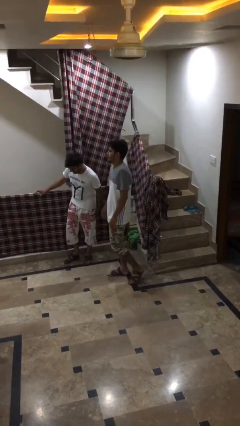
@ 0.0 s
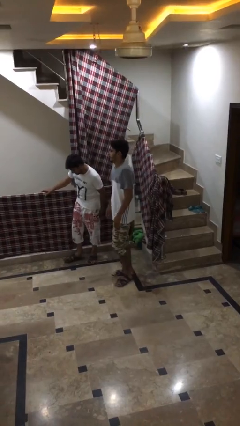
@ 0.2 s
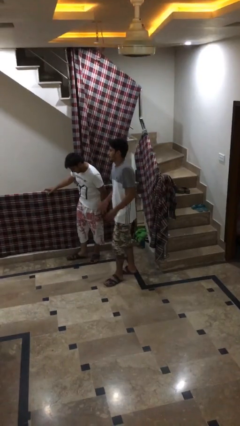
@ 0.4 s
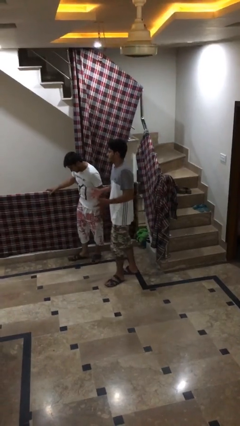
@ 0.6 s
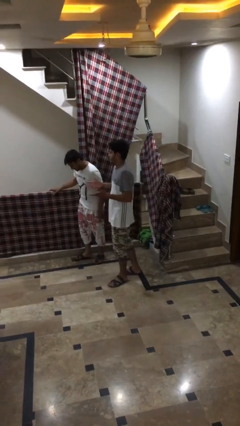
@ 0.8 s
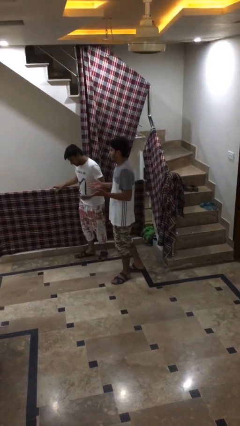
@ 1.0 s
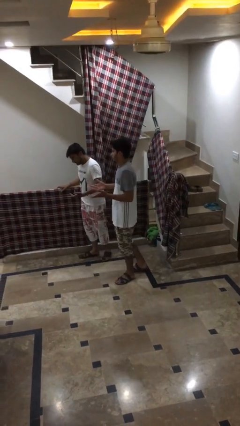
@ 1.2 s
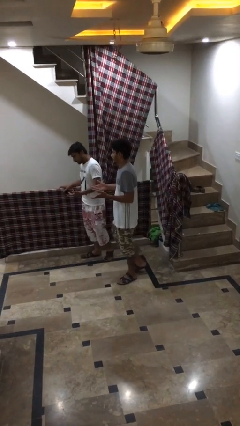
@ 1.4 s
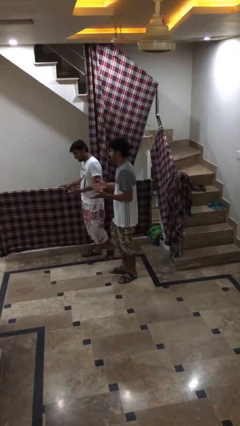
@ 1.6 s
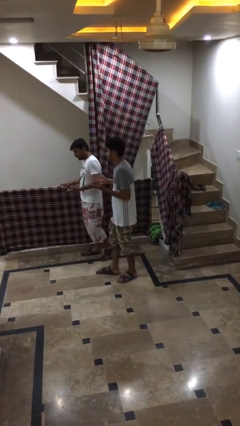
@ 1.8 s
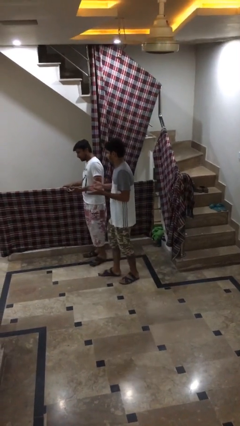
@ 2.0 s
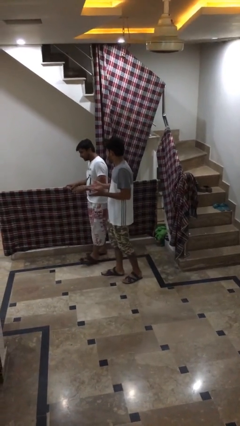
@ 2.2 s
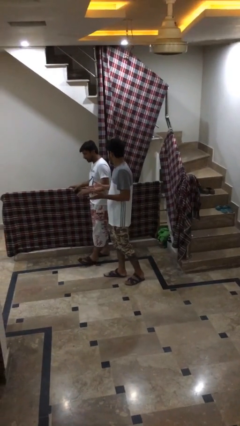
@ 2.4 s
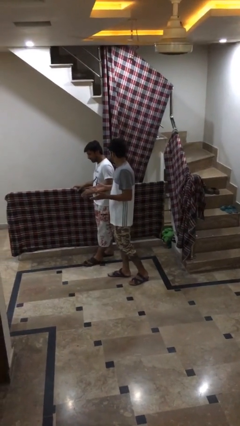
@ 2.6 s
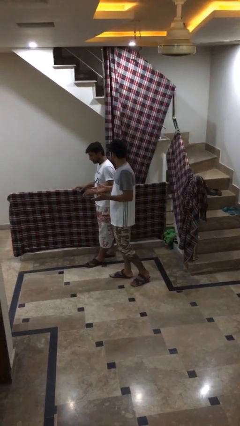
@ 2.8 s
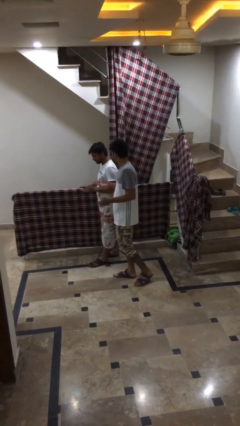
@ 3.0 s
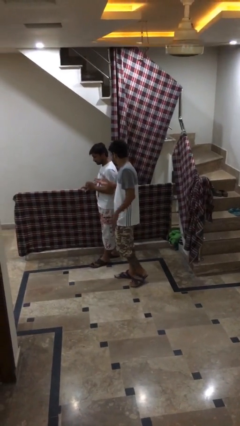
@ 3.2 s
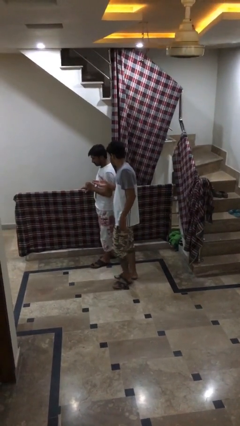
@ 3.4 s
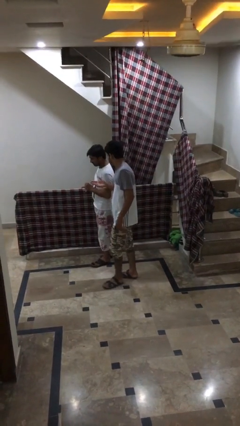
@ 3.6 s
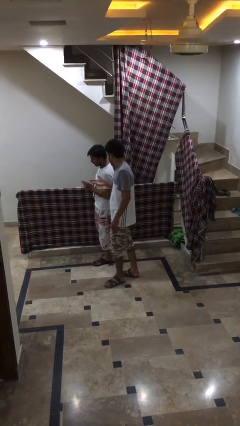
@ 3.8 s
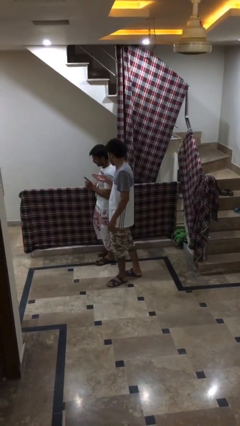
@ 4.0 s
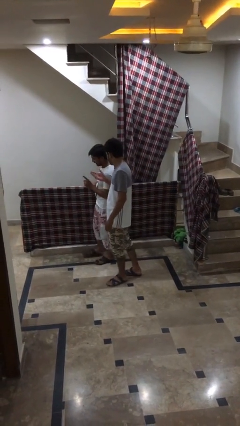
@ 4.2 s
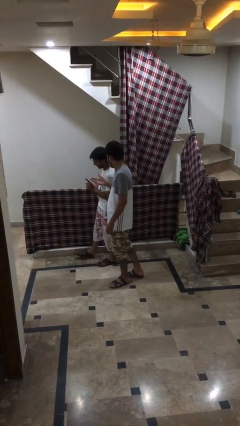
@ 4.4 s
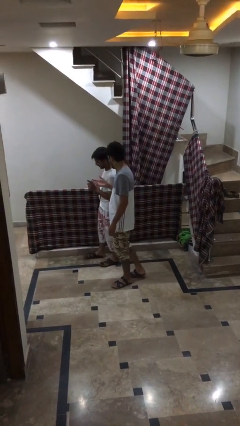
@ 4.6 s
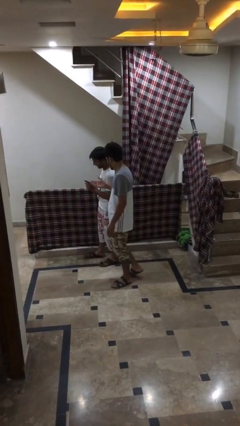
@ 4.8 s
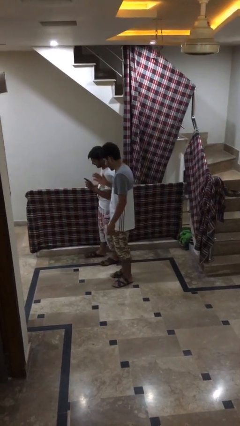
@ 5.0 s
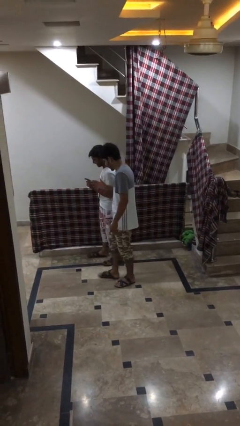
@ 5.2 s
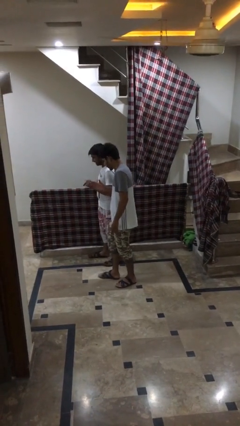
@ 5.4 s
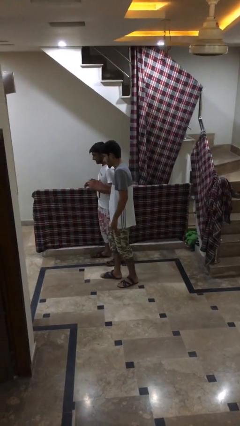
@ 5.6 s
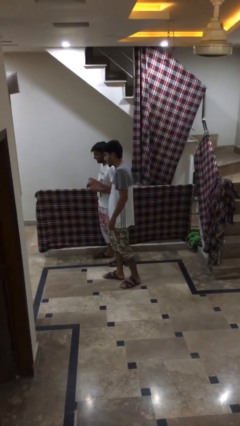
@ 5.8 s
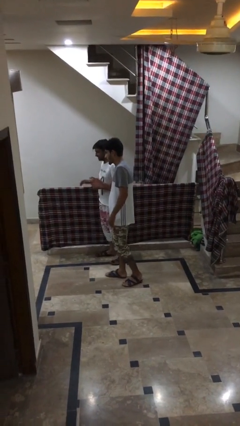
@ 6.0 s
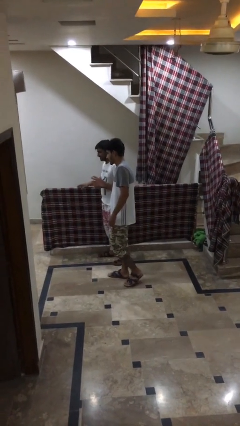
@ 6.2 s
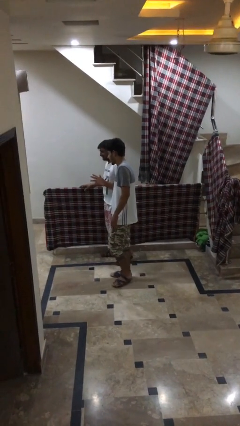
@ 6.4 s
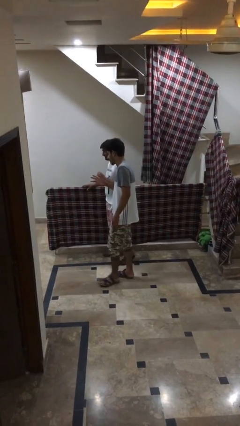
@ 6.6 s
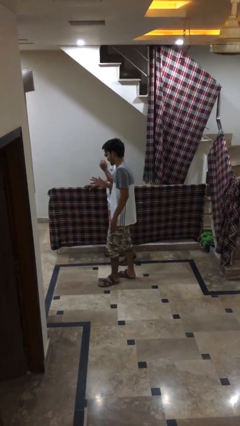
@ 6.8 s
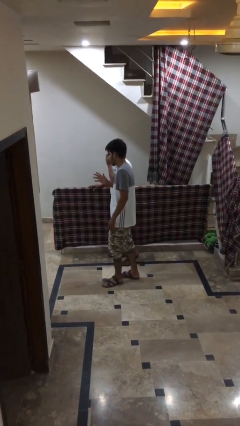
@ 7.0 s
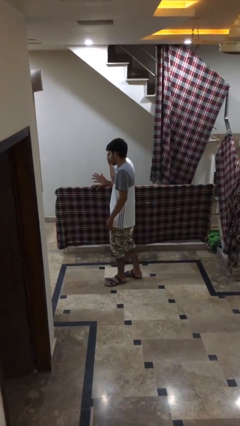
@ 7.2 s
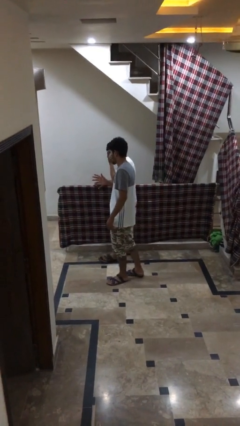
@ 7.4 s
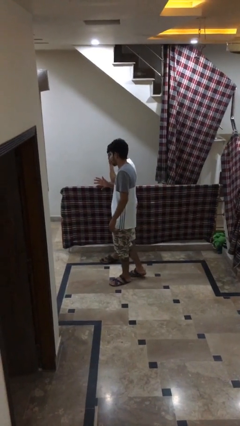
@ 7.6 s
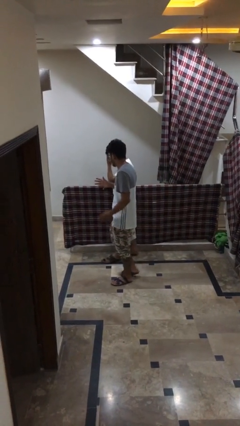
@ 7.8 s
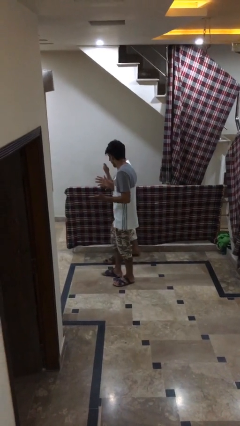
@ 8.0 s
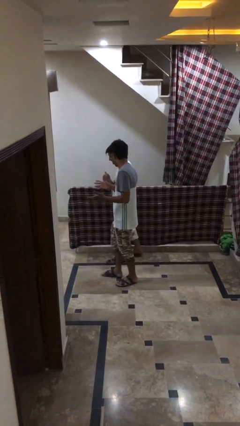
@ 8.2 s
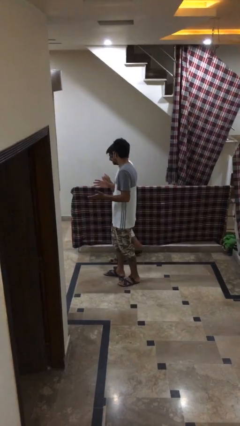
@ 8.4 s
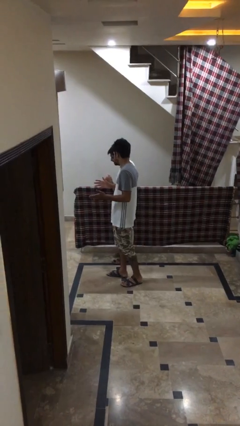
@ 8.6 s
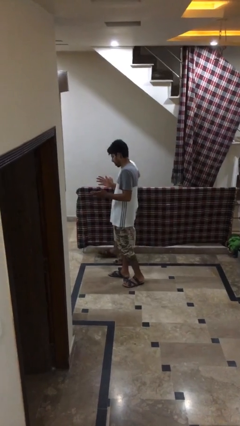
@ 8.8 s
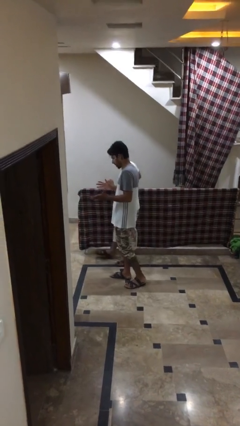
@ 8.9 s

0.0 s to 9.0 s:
person talks to person

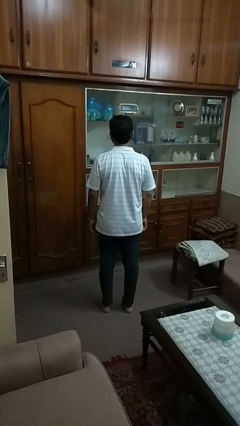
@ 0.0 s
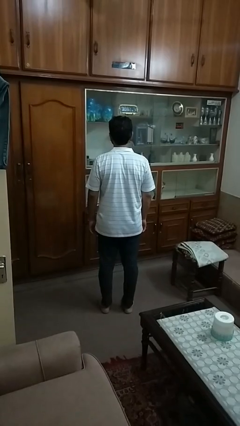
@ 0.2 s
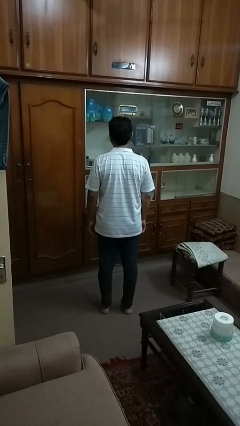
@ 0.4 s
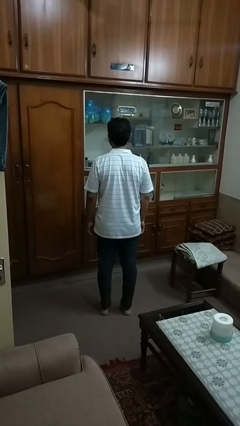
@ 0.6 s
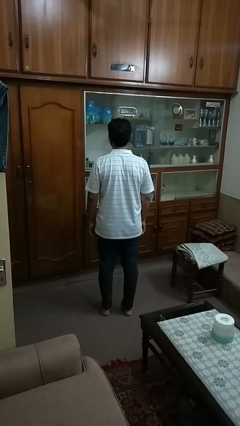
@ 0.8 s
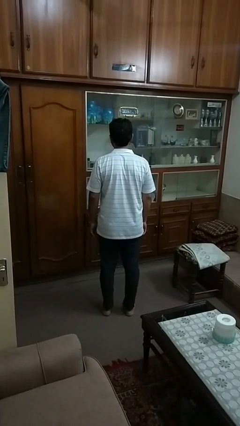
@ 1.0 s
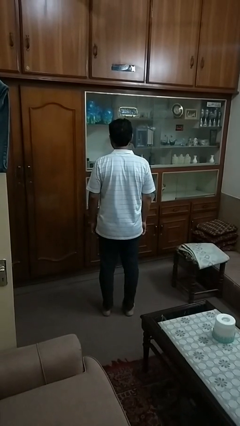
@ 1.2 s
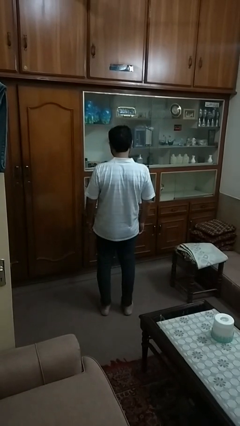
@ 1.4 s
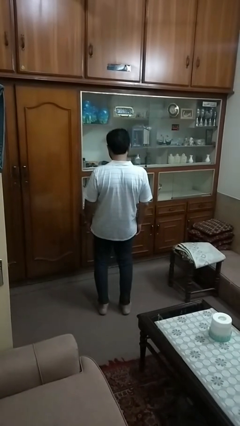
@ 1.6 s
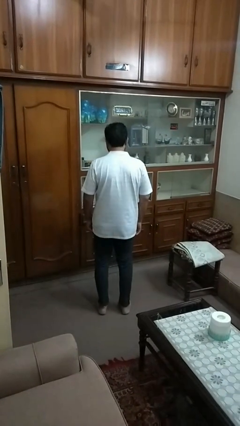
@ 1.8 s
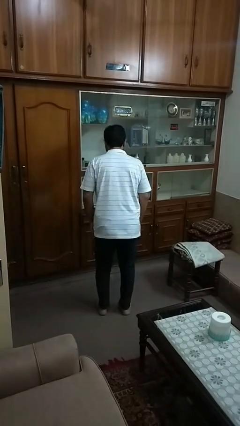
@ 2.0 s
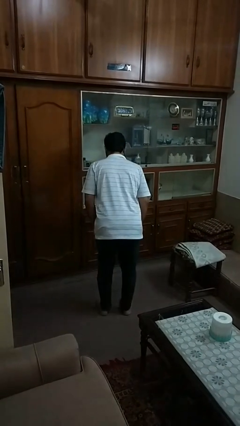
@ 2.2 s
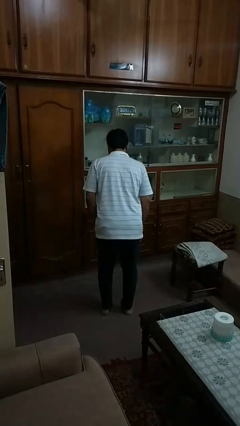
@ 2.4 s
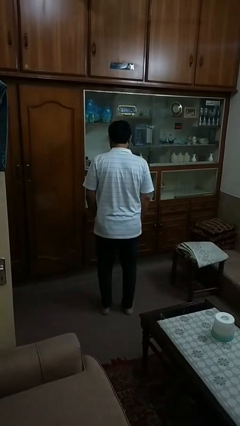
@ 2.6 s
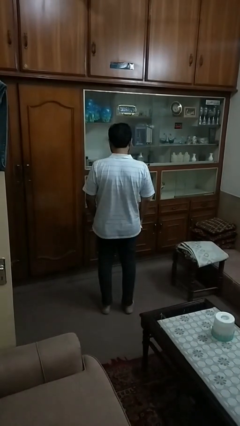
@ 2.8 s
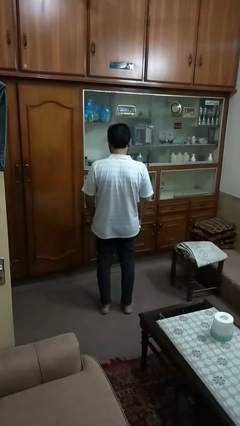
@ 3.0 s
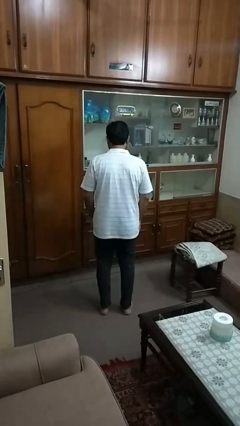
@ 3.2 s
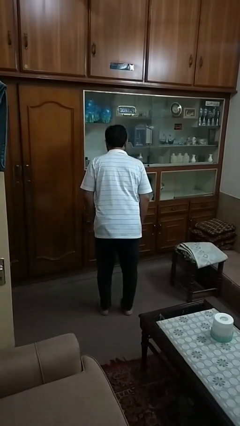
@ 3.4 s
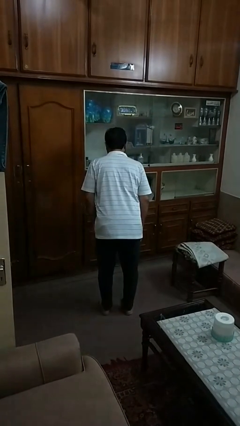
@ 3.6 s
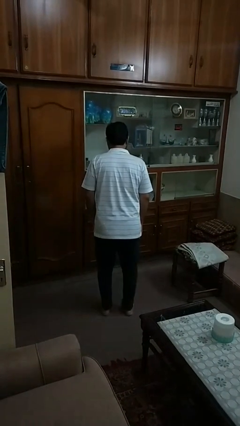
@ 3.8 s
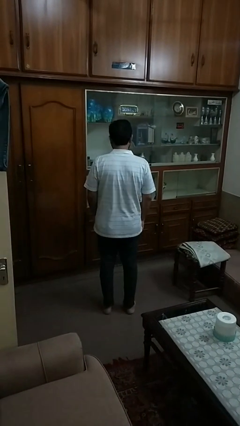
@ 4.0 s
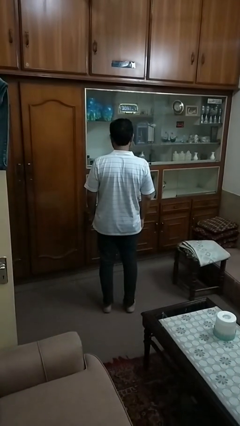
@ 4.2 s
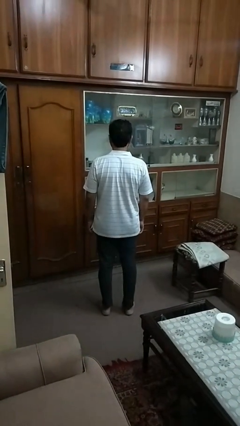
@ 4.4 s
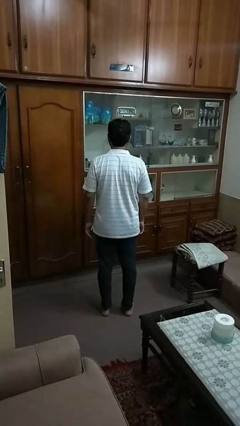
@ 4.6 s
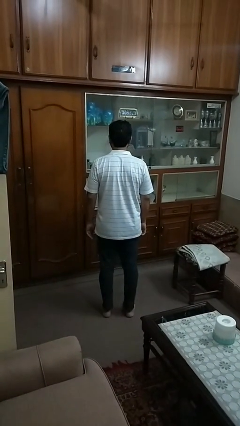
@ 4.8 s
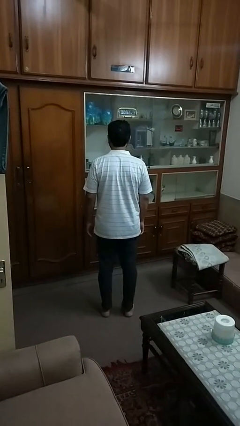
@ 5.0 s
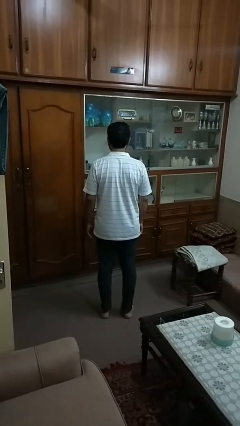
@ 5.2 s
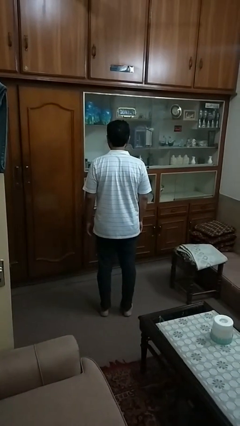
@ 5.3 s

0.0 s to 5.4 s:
person wiggles hips

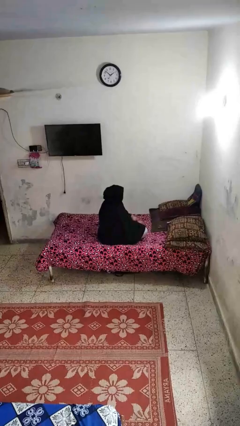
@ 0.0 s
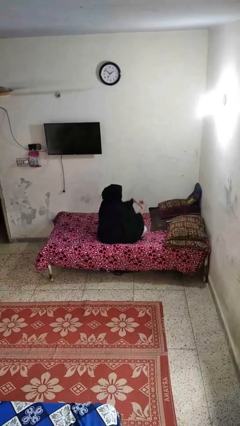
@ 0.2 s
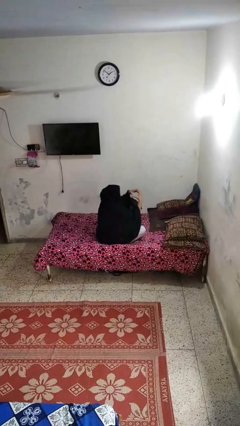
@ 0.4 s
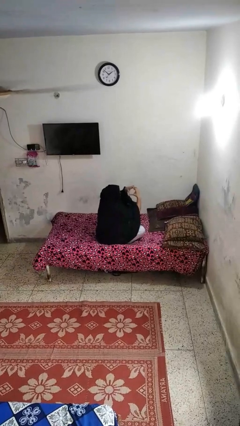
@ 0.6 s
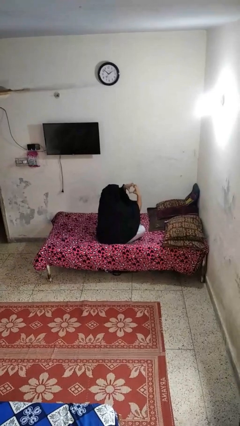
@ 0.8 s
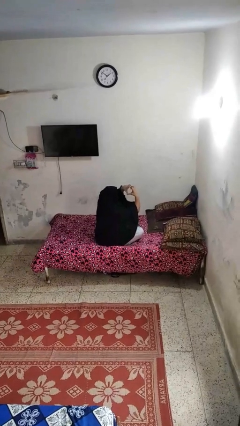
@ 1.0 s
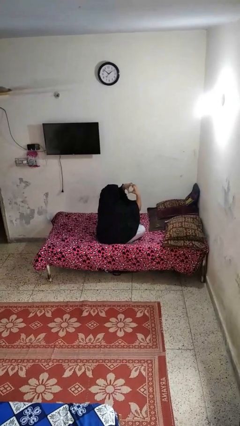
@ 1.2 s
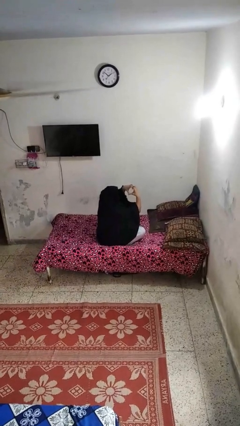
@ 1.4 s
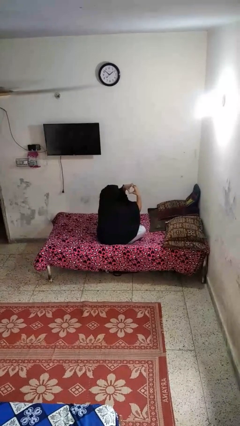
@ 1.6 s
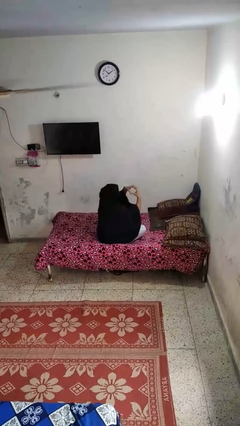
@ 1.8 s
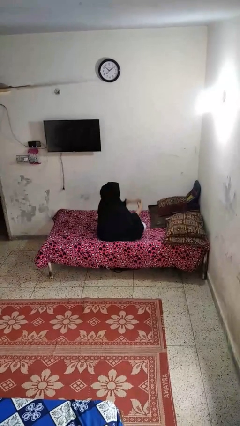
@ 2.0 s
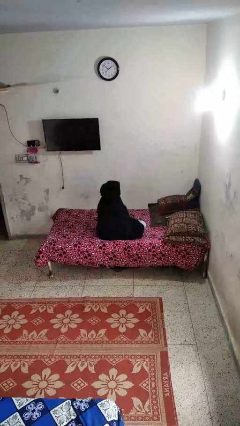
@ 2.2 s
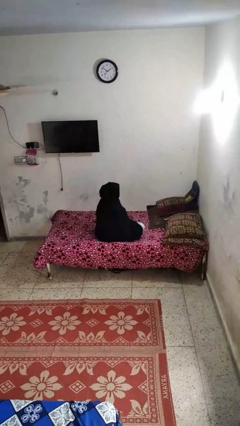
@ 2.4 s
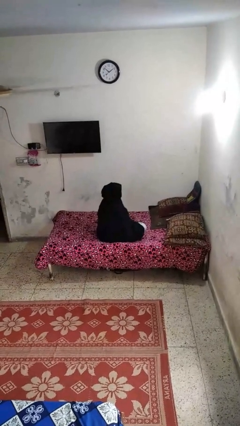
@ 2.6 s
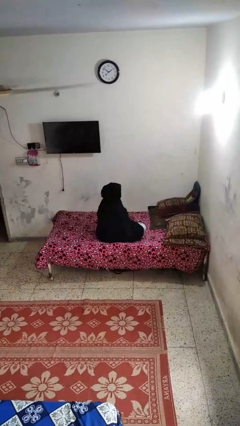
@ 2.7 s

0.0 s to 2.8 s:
person gestures heart

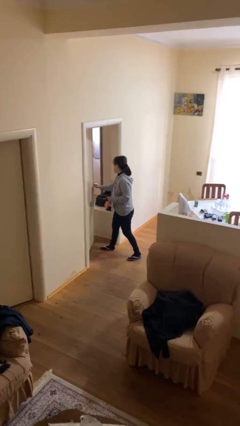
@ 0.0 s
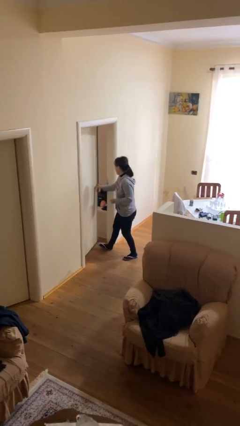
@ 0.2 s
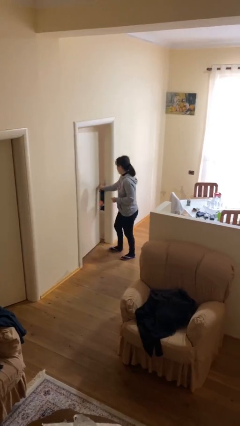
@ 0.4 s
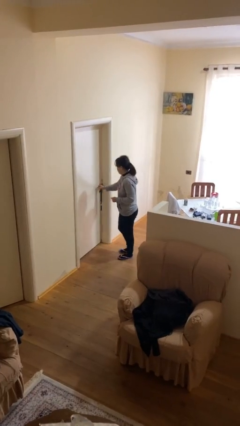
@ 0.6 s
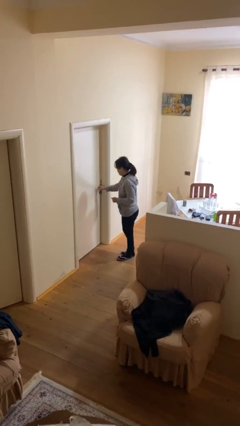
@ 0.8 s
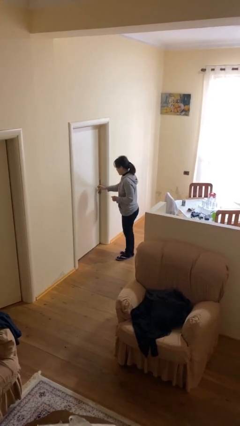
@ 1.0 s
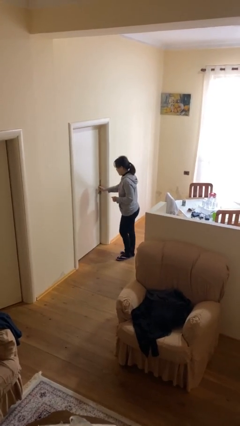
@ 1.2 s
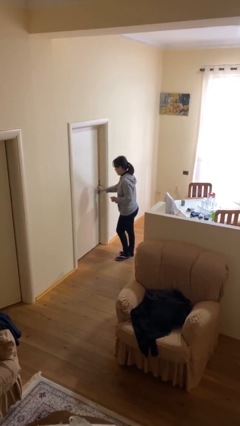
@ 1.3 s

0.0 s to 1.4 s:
person closes facility door
